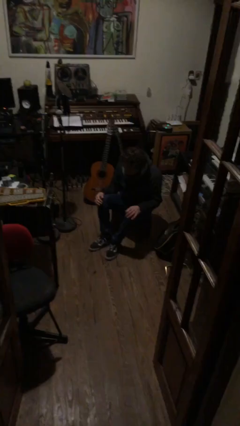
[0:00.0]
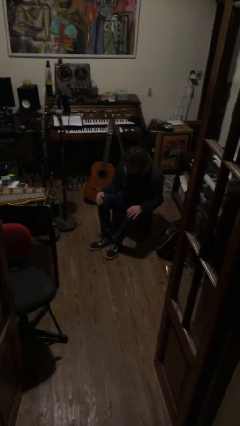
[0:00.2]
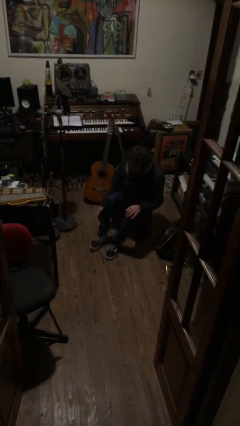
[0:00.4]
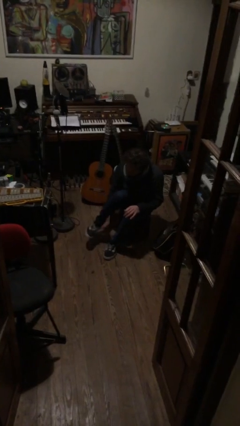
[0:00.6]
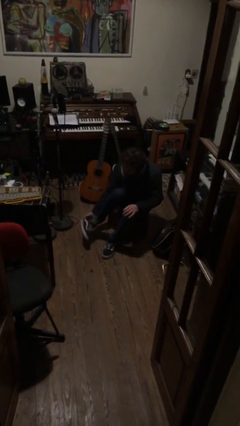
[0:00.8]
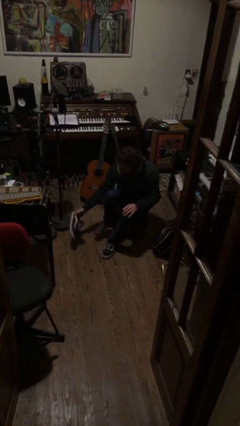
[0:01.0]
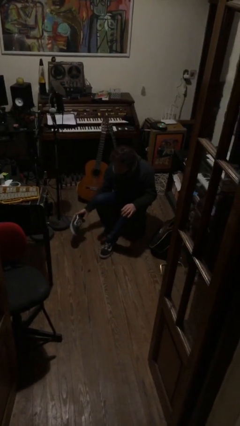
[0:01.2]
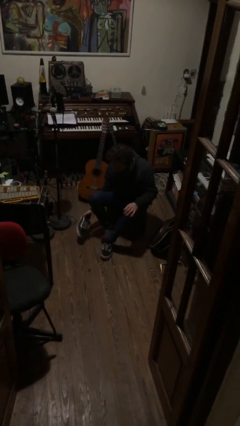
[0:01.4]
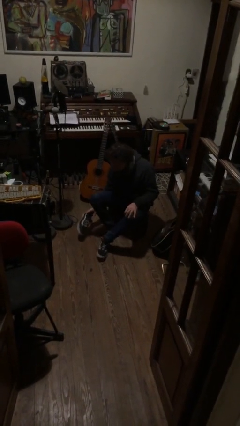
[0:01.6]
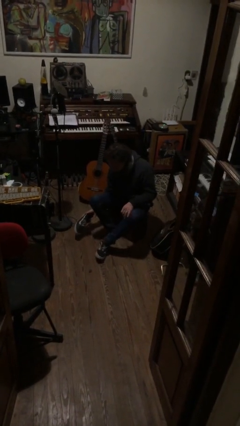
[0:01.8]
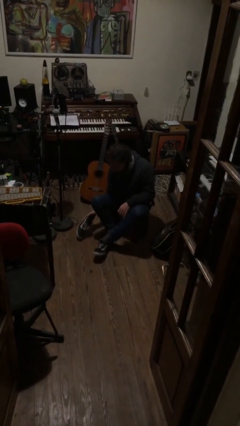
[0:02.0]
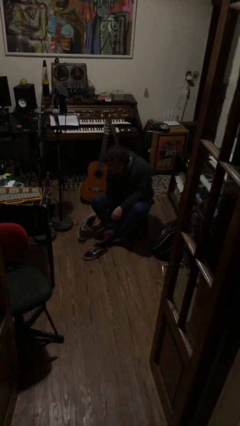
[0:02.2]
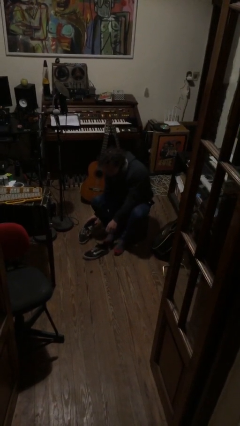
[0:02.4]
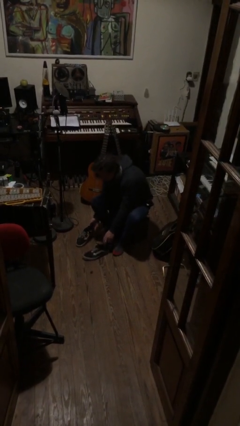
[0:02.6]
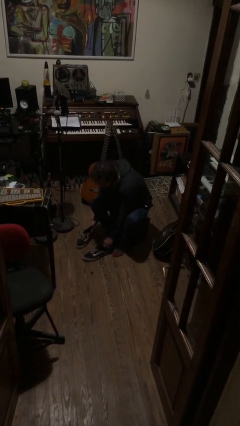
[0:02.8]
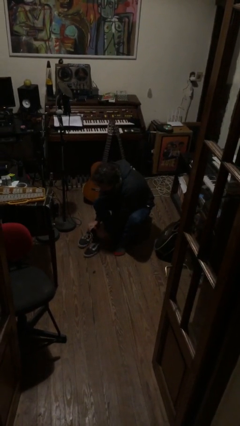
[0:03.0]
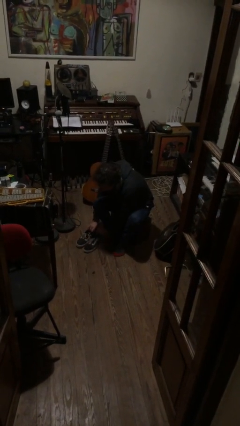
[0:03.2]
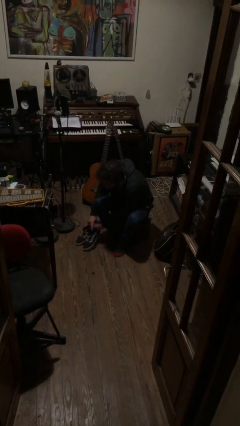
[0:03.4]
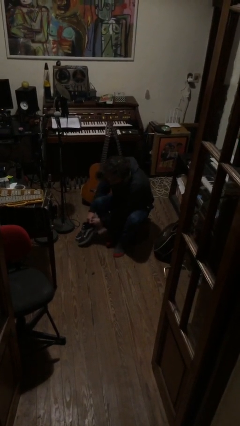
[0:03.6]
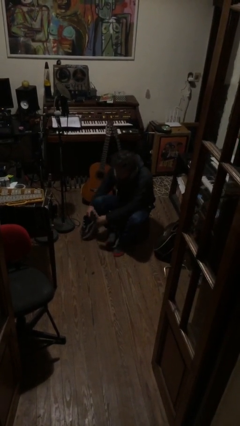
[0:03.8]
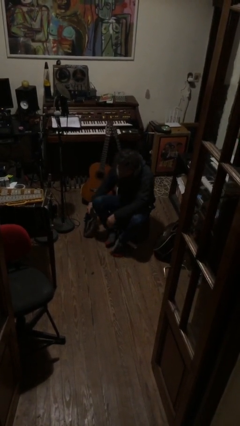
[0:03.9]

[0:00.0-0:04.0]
person takes off shoes

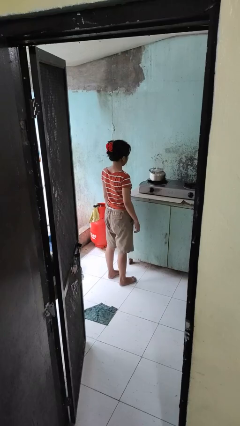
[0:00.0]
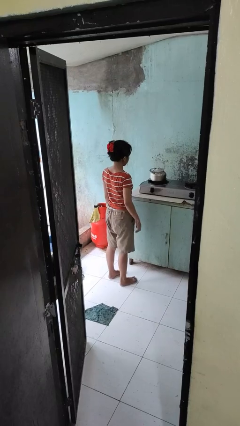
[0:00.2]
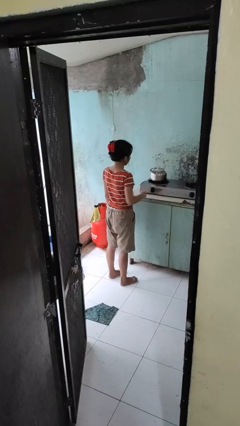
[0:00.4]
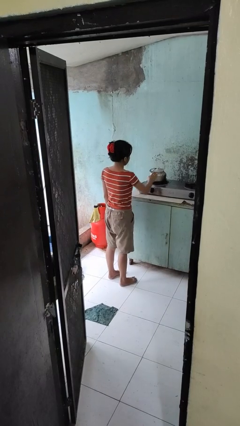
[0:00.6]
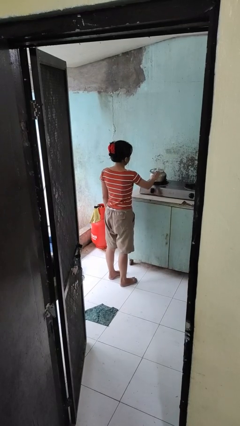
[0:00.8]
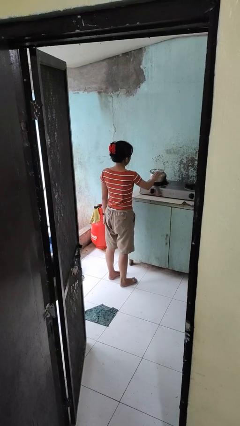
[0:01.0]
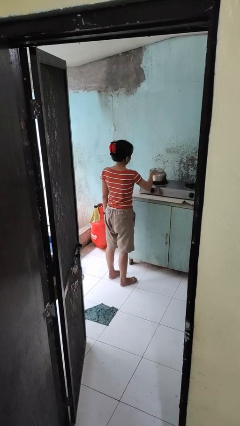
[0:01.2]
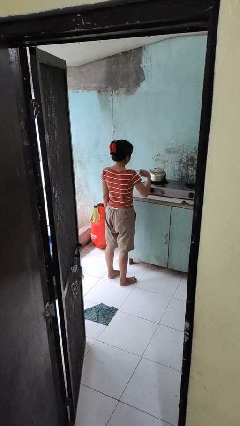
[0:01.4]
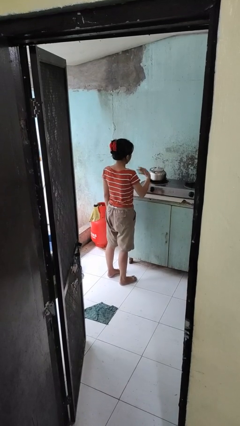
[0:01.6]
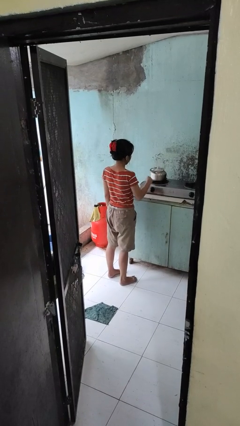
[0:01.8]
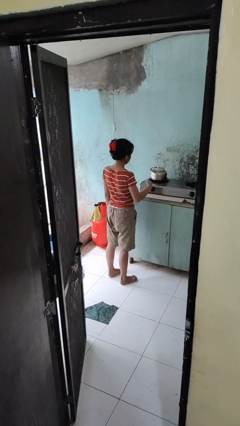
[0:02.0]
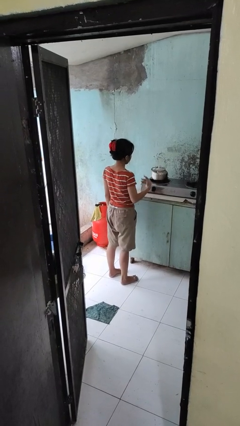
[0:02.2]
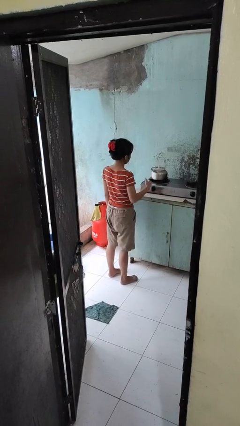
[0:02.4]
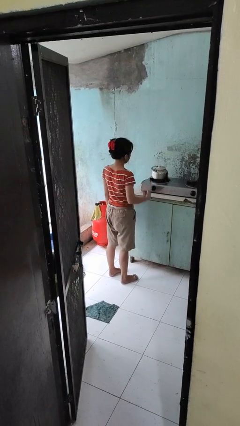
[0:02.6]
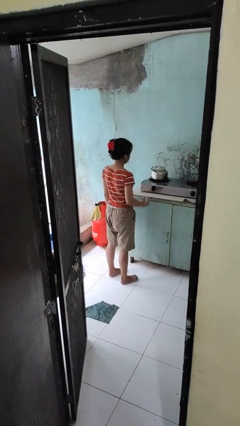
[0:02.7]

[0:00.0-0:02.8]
person burns hand

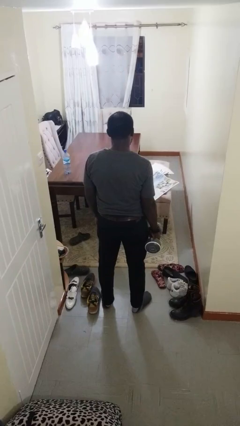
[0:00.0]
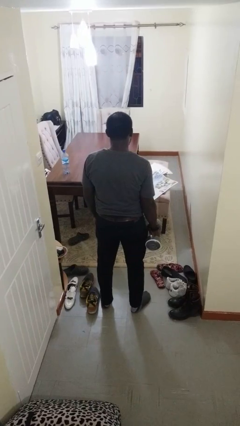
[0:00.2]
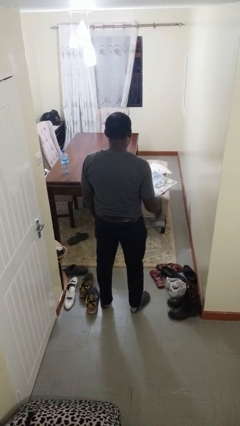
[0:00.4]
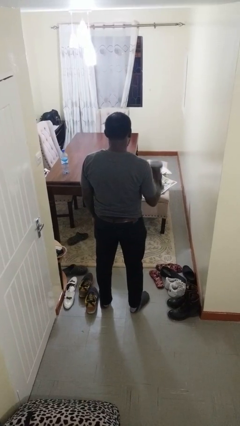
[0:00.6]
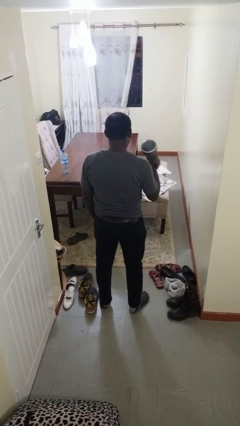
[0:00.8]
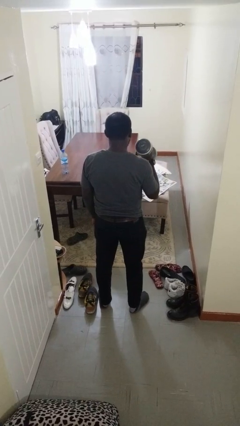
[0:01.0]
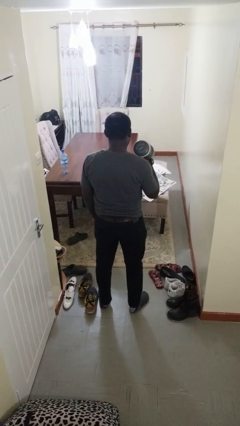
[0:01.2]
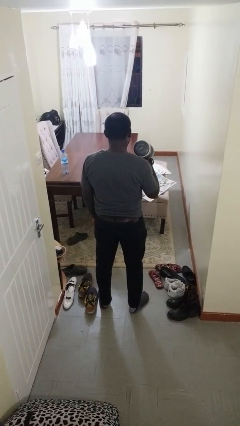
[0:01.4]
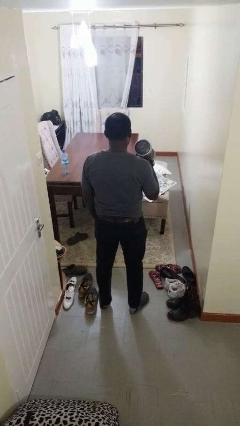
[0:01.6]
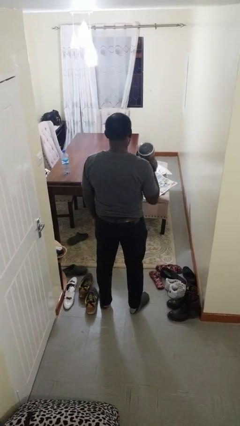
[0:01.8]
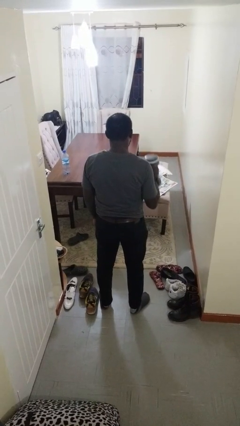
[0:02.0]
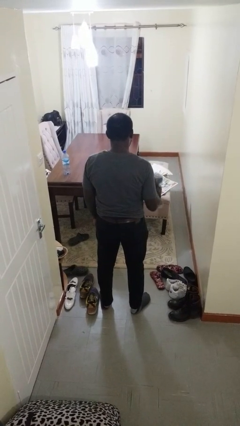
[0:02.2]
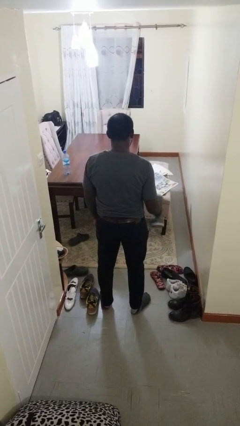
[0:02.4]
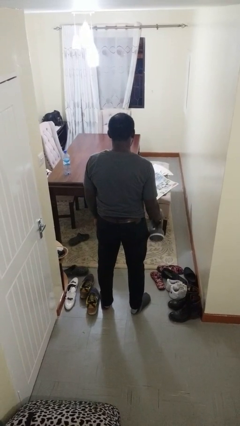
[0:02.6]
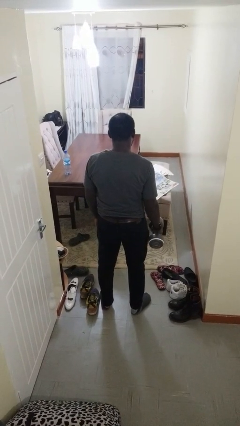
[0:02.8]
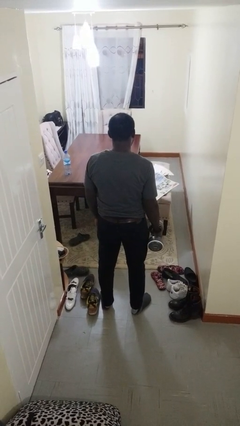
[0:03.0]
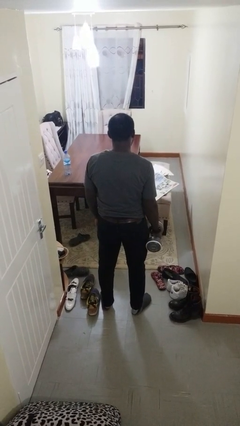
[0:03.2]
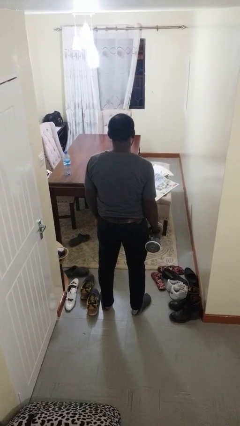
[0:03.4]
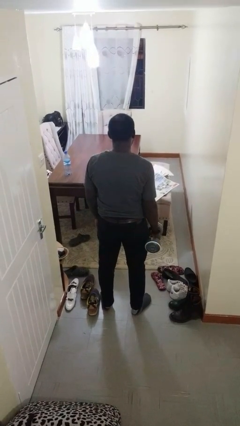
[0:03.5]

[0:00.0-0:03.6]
person lifts dumbbells

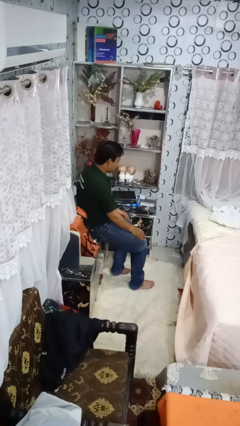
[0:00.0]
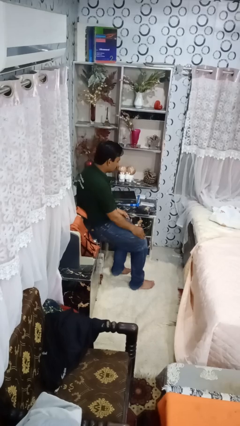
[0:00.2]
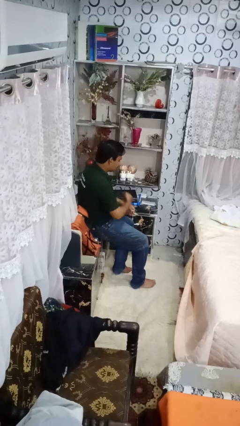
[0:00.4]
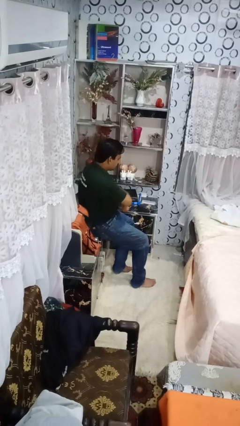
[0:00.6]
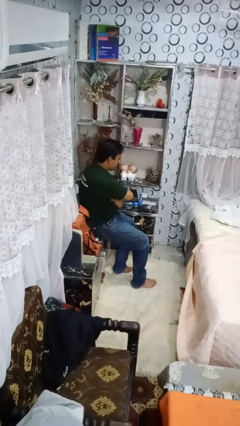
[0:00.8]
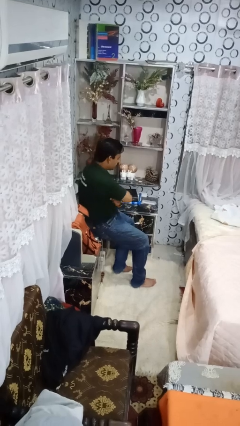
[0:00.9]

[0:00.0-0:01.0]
person crosses arms

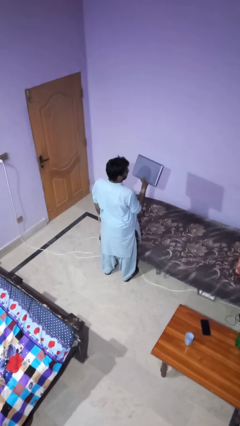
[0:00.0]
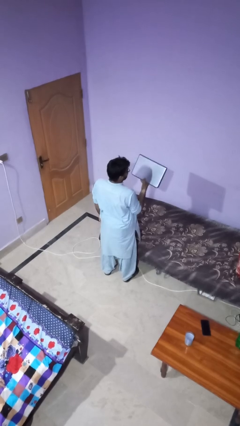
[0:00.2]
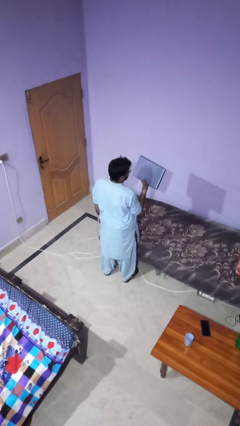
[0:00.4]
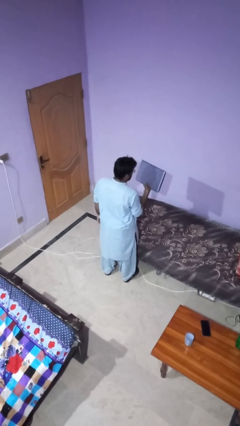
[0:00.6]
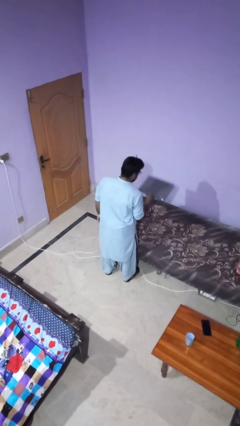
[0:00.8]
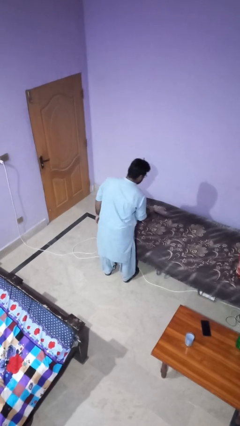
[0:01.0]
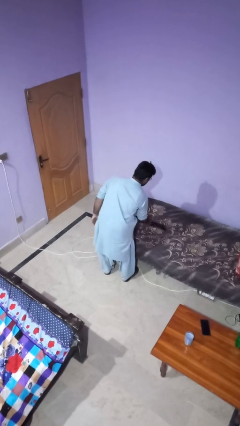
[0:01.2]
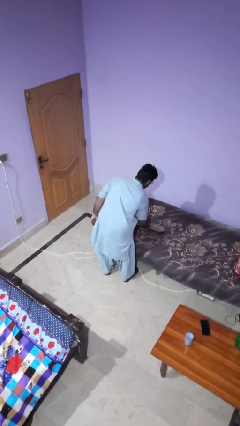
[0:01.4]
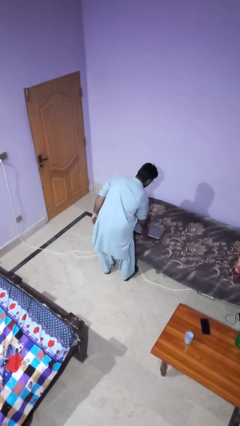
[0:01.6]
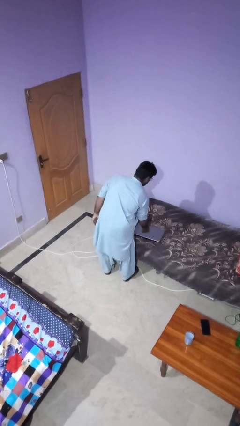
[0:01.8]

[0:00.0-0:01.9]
person puts down object on bed

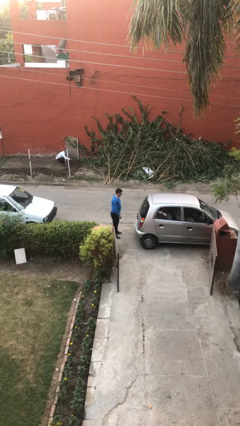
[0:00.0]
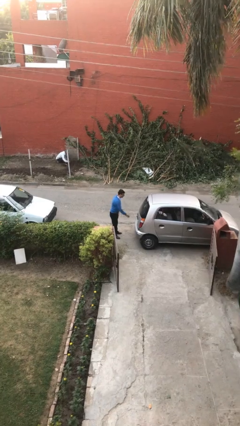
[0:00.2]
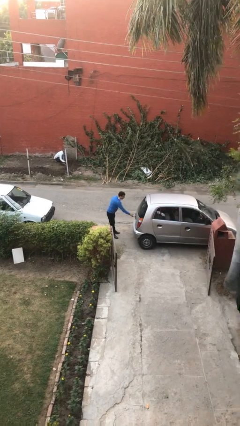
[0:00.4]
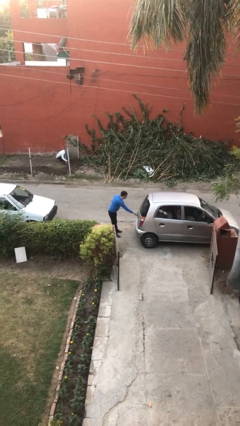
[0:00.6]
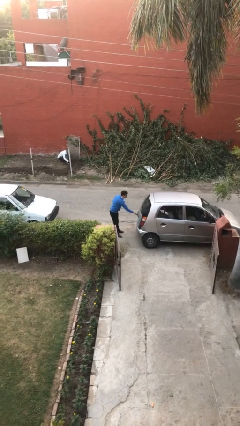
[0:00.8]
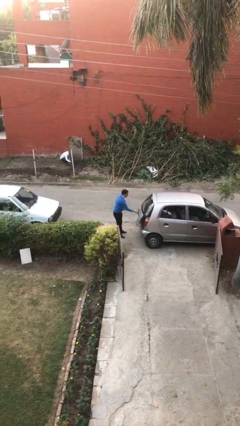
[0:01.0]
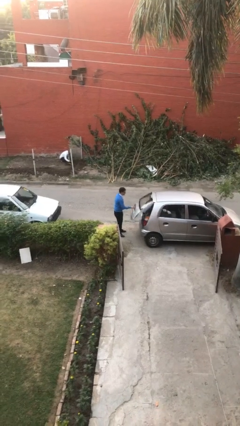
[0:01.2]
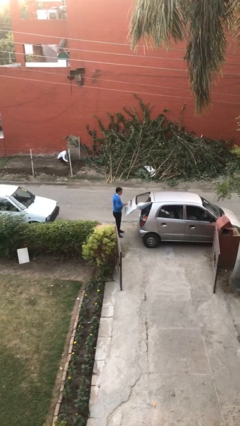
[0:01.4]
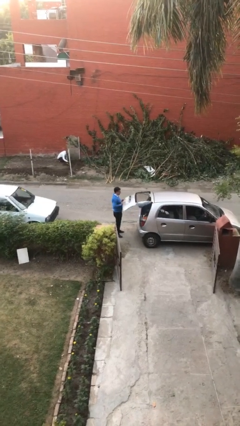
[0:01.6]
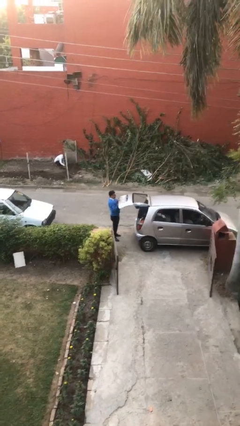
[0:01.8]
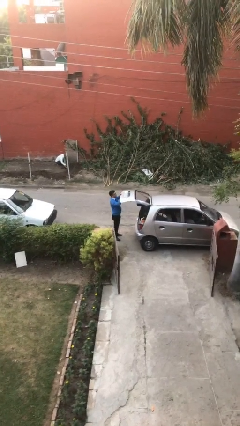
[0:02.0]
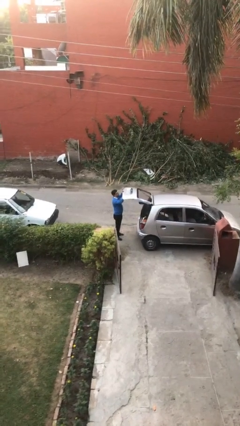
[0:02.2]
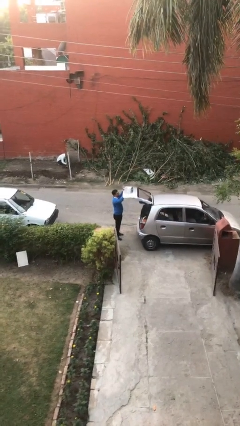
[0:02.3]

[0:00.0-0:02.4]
person opens car trunk

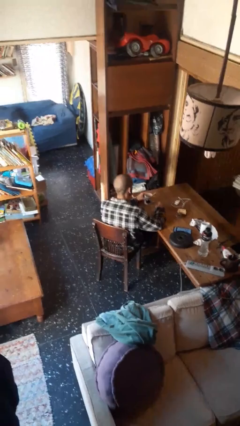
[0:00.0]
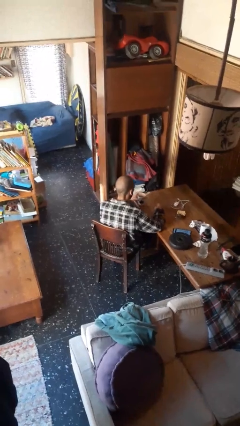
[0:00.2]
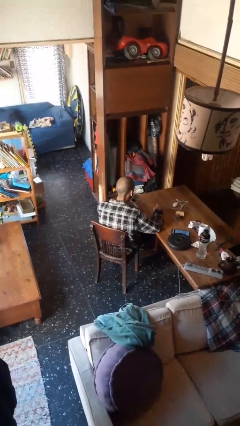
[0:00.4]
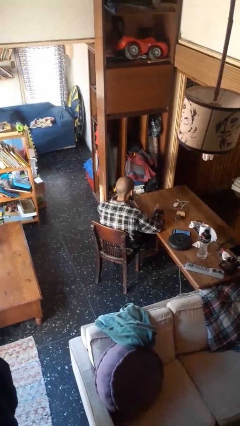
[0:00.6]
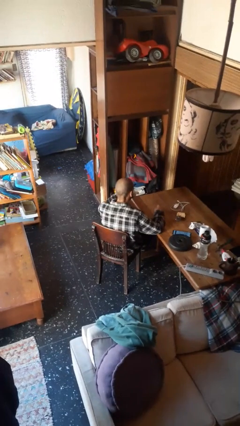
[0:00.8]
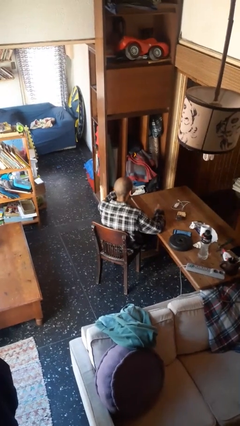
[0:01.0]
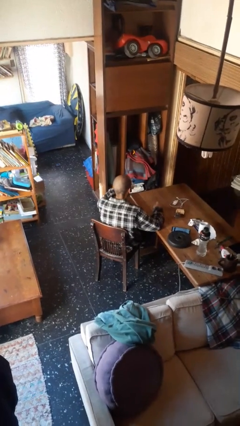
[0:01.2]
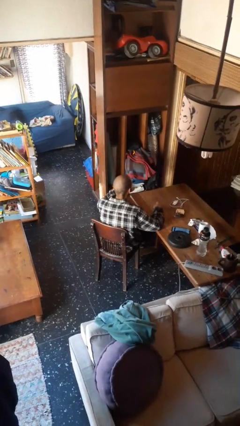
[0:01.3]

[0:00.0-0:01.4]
person drinks from mug
